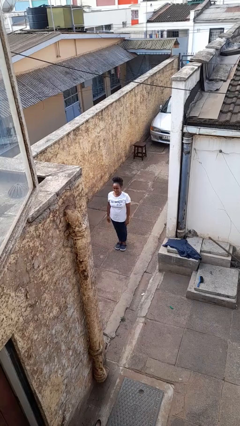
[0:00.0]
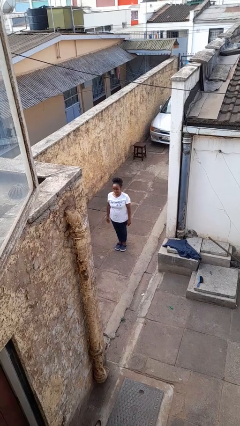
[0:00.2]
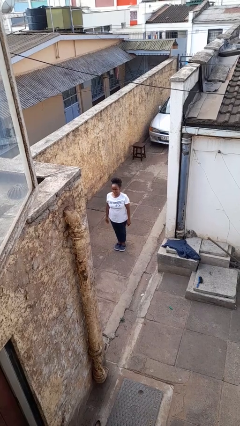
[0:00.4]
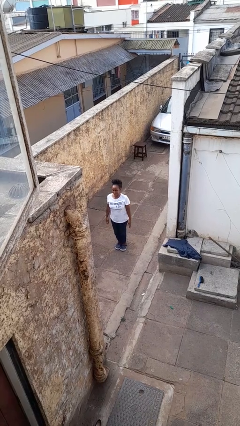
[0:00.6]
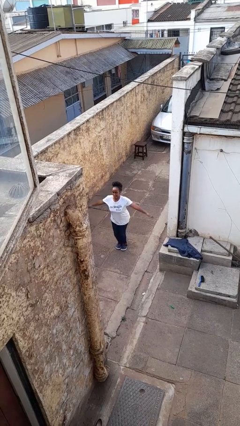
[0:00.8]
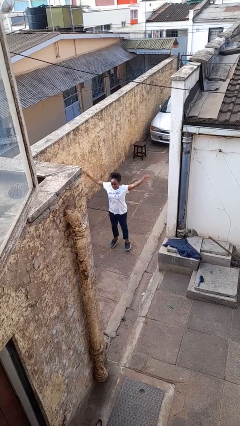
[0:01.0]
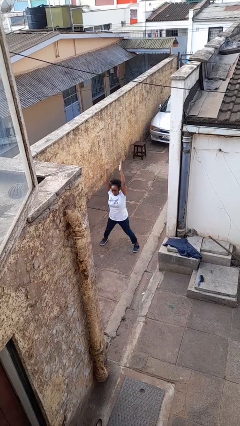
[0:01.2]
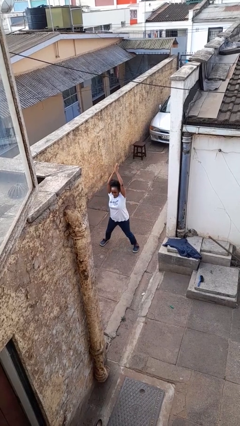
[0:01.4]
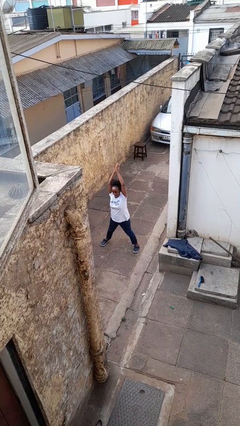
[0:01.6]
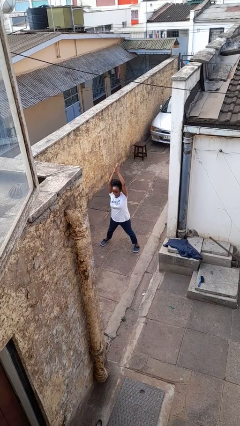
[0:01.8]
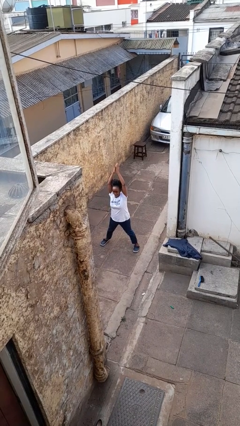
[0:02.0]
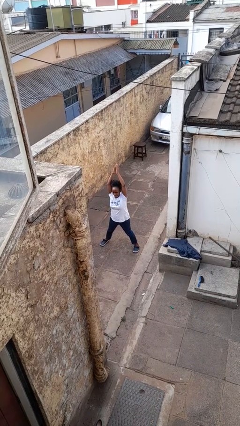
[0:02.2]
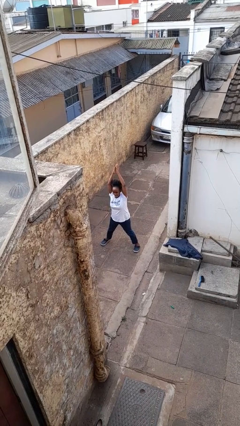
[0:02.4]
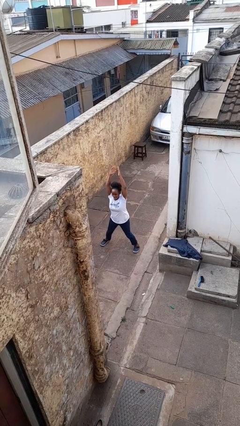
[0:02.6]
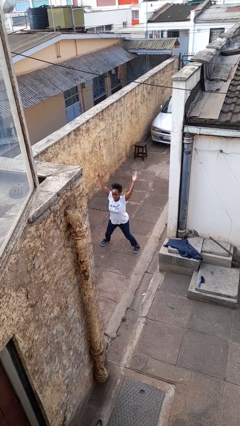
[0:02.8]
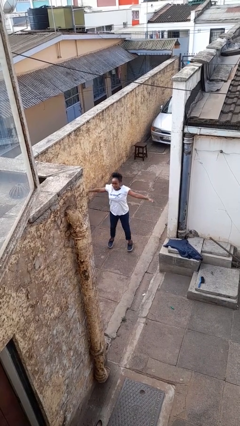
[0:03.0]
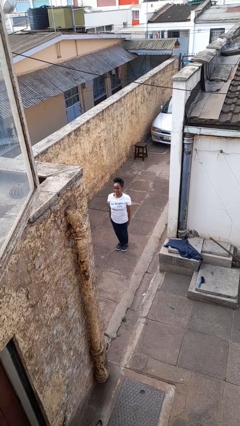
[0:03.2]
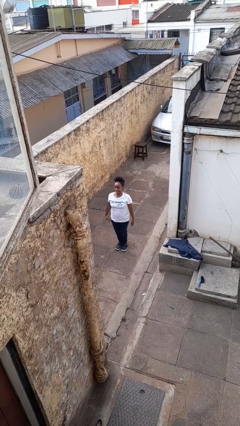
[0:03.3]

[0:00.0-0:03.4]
person exercises with jumping jacks

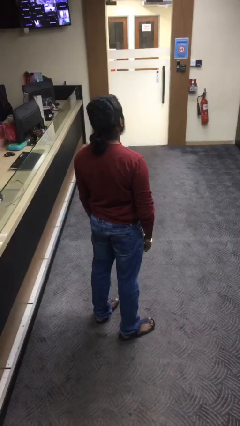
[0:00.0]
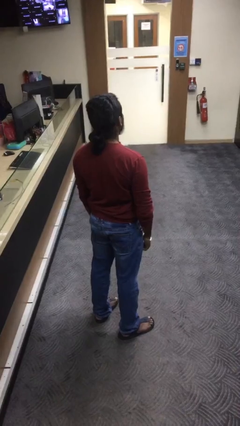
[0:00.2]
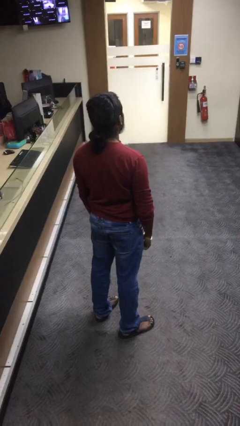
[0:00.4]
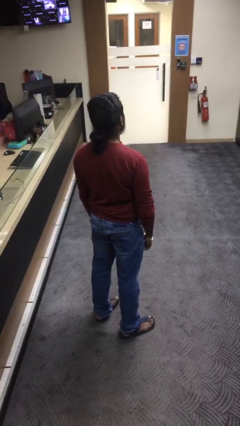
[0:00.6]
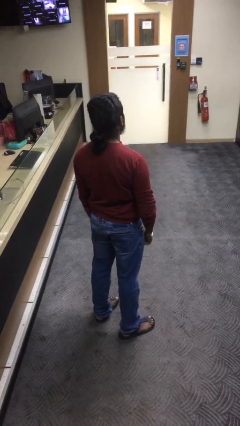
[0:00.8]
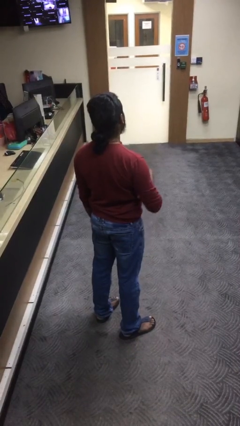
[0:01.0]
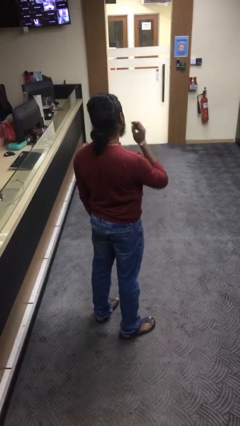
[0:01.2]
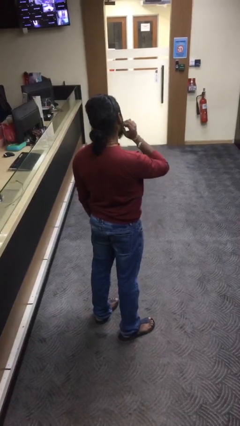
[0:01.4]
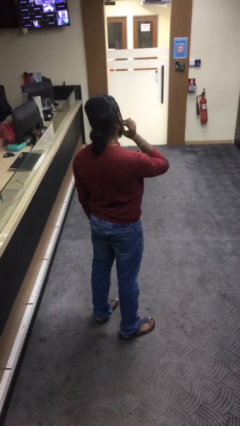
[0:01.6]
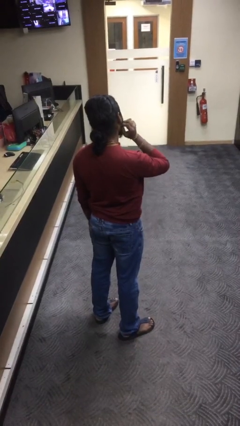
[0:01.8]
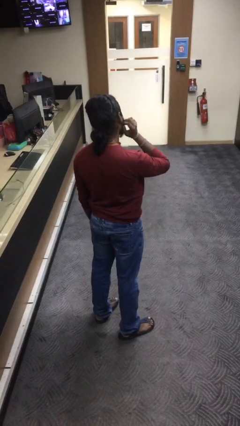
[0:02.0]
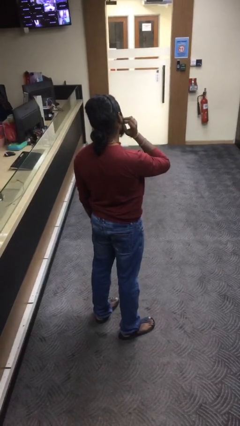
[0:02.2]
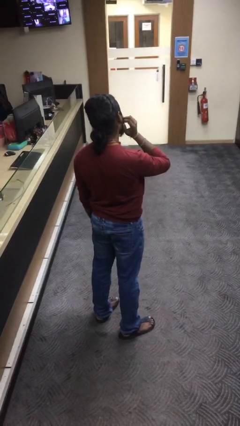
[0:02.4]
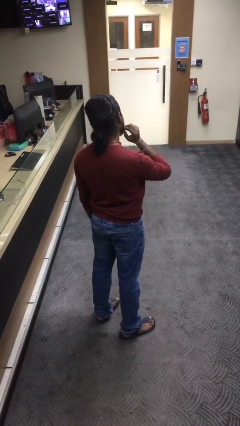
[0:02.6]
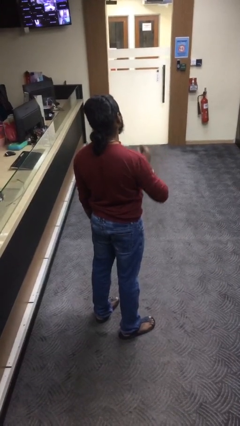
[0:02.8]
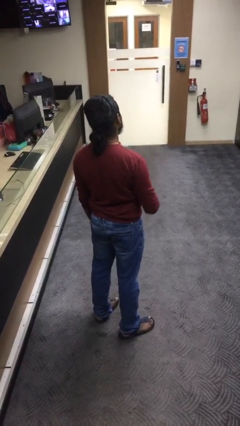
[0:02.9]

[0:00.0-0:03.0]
person scratches face

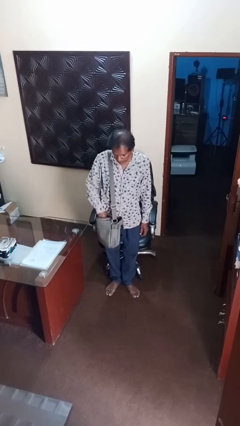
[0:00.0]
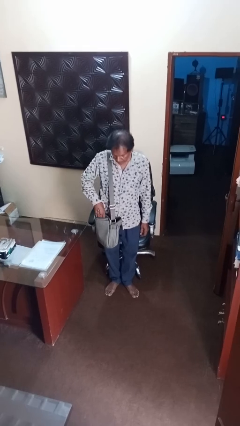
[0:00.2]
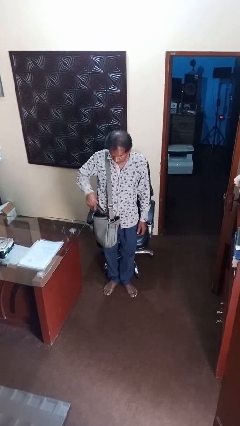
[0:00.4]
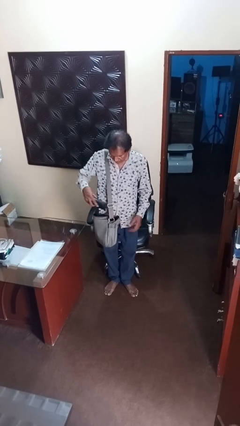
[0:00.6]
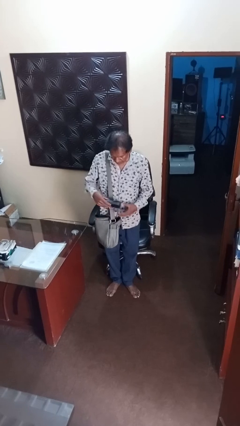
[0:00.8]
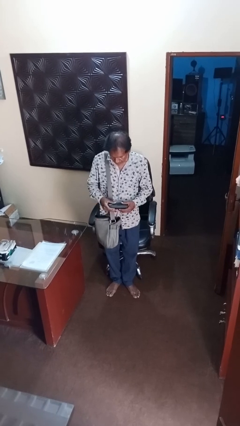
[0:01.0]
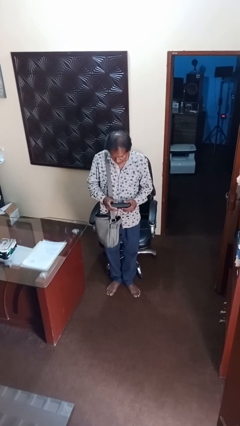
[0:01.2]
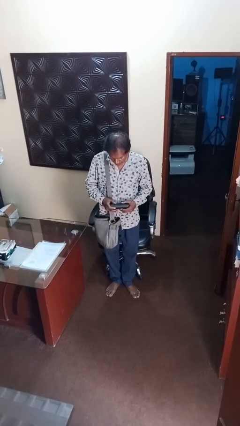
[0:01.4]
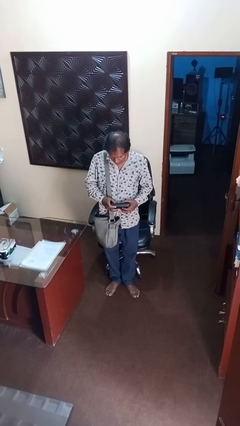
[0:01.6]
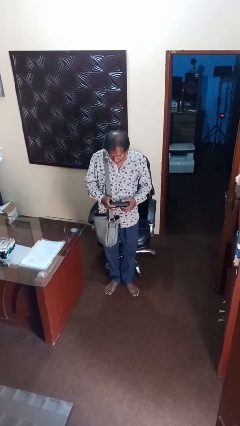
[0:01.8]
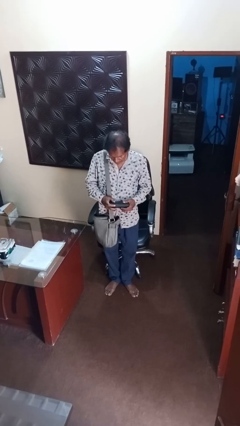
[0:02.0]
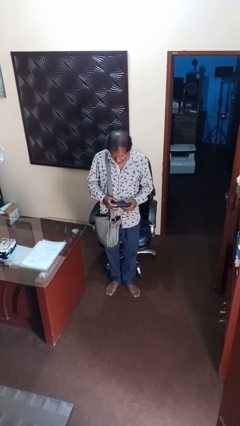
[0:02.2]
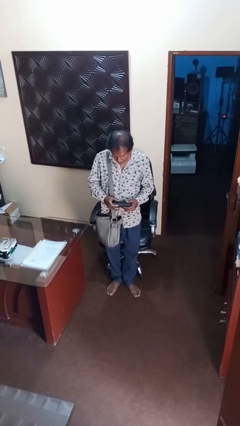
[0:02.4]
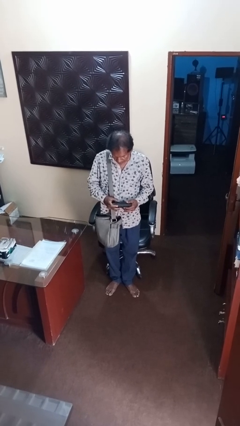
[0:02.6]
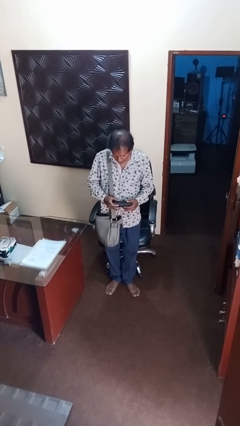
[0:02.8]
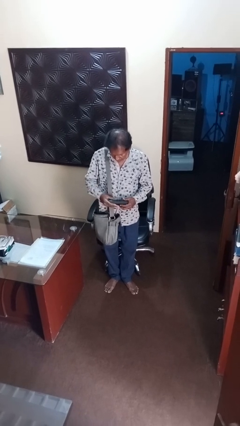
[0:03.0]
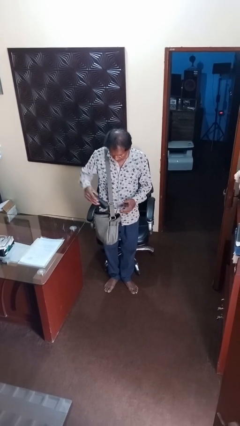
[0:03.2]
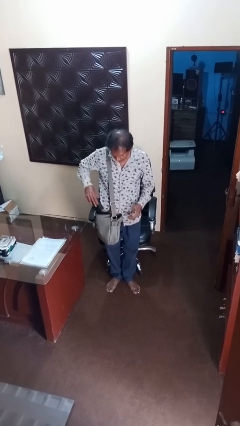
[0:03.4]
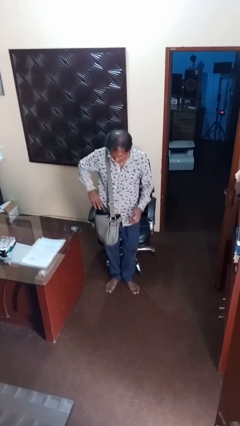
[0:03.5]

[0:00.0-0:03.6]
person takes object from backpack

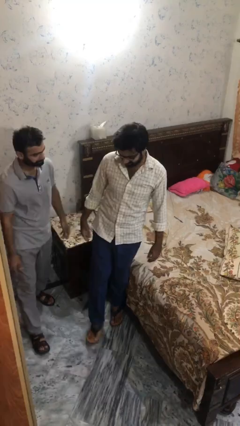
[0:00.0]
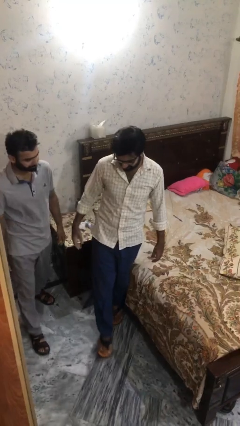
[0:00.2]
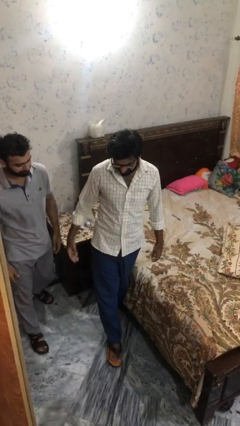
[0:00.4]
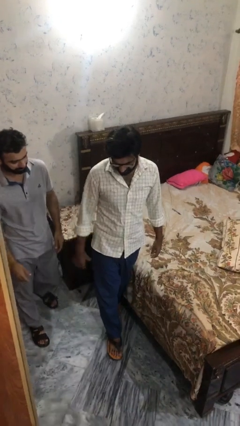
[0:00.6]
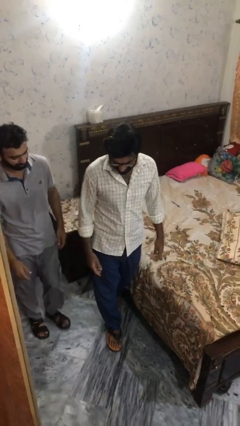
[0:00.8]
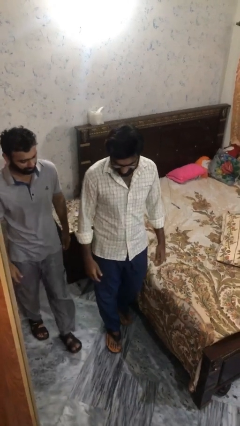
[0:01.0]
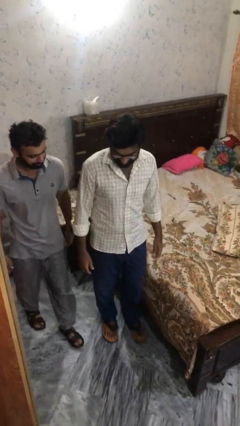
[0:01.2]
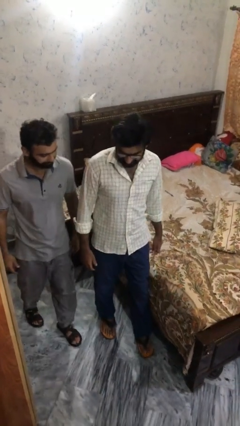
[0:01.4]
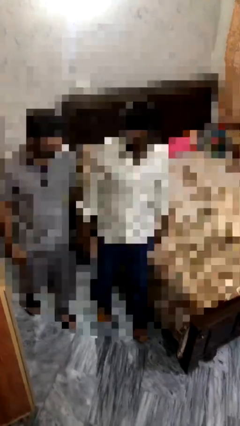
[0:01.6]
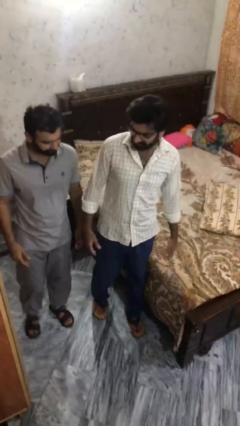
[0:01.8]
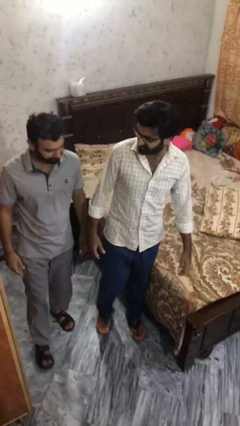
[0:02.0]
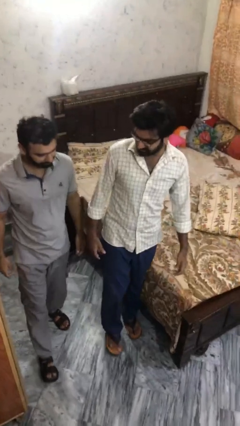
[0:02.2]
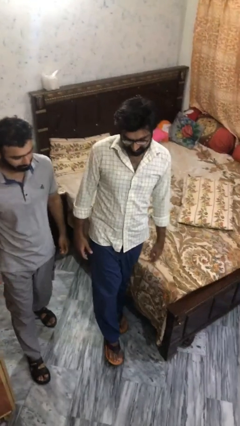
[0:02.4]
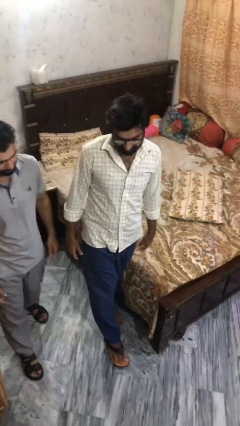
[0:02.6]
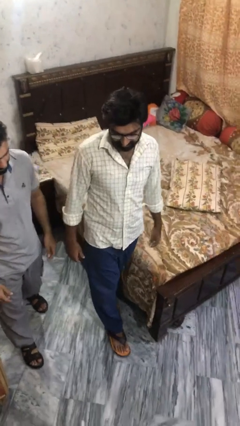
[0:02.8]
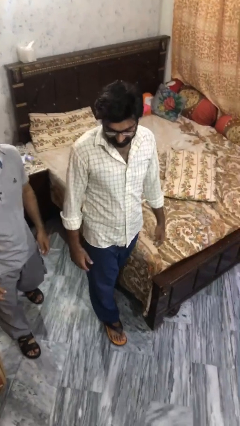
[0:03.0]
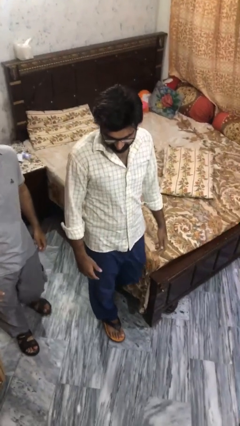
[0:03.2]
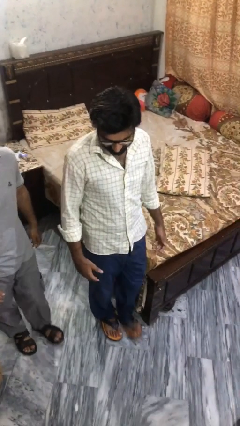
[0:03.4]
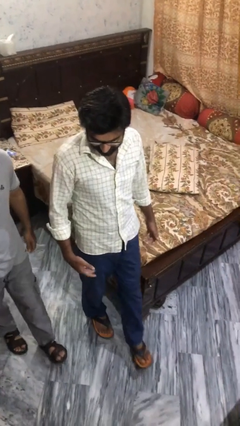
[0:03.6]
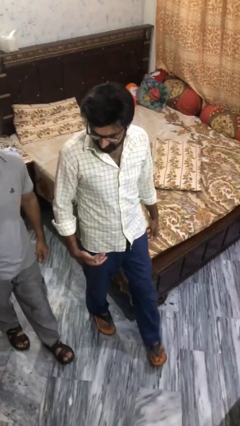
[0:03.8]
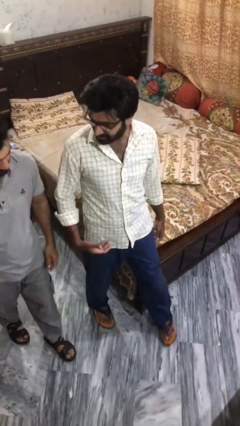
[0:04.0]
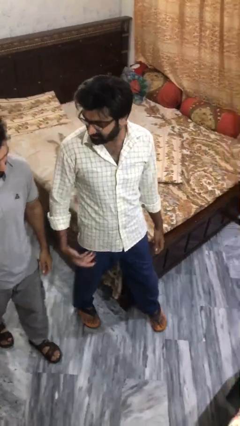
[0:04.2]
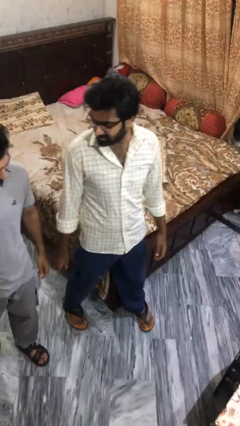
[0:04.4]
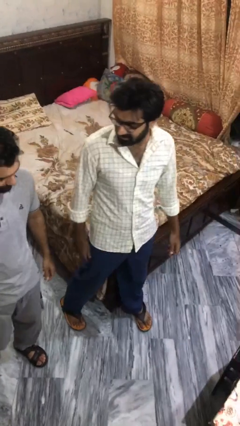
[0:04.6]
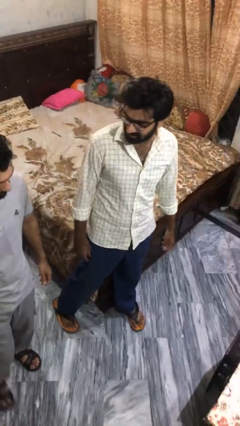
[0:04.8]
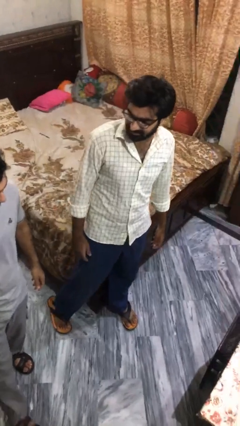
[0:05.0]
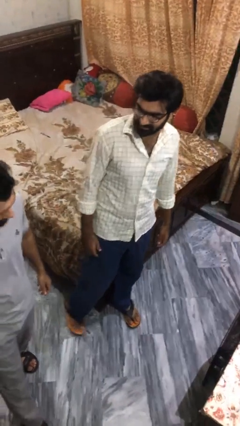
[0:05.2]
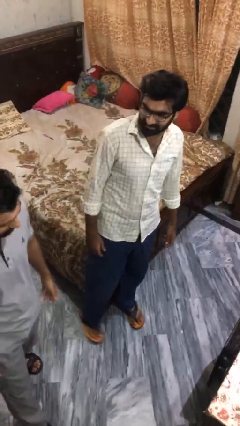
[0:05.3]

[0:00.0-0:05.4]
person talks to person

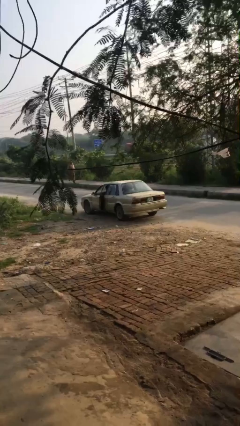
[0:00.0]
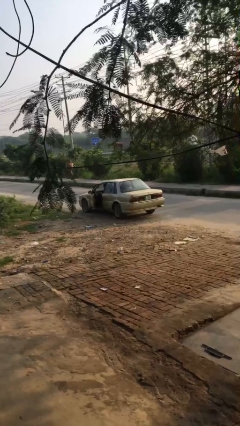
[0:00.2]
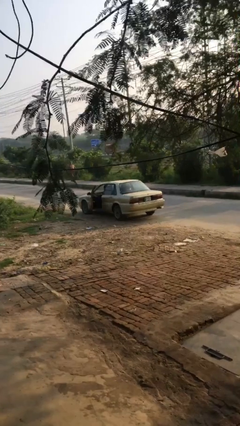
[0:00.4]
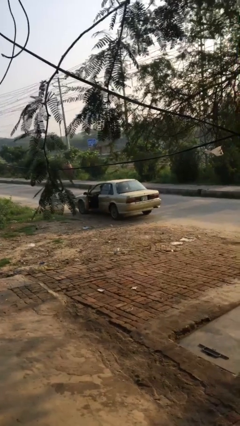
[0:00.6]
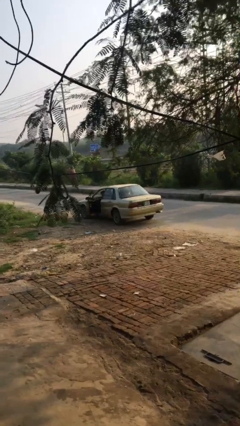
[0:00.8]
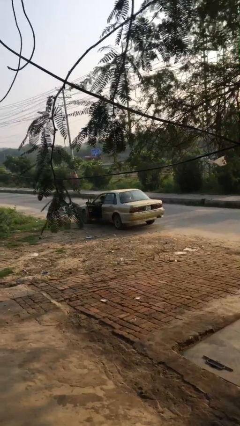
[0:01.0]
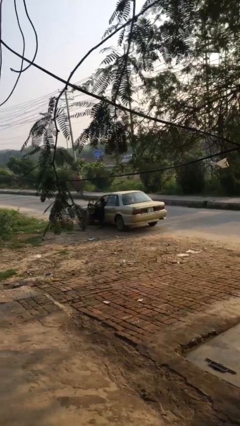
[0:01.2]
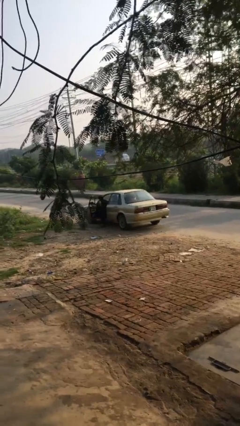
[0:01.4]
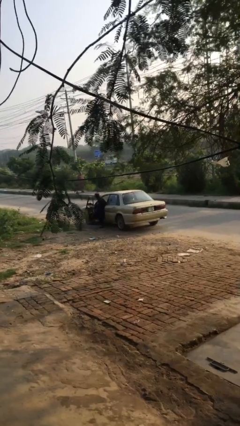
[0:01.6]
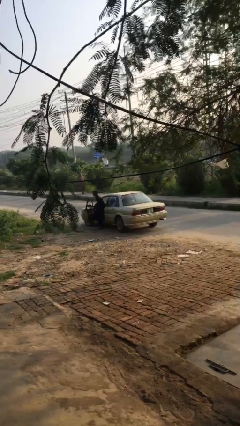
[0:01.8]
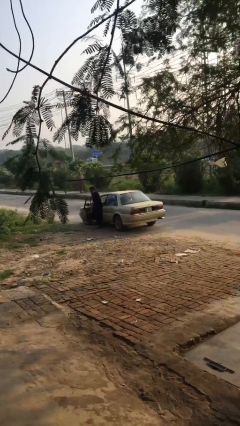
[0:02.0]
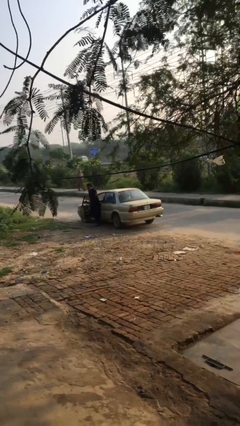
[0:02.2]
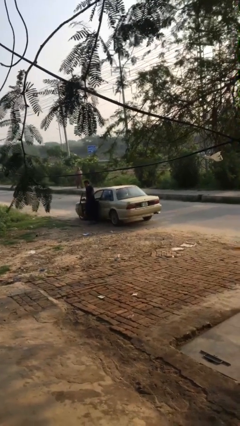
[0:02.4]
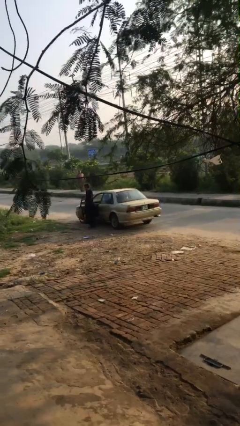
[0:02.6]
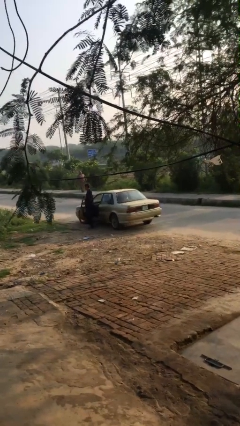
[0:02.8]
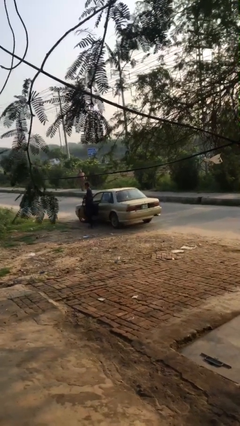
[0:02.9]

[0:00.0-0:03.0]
car drops off person
